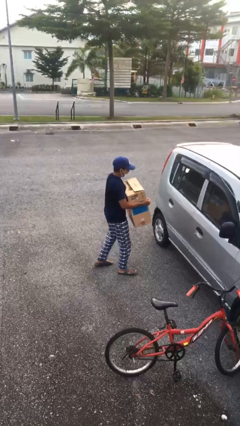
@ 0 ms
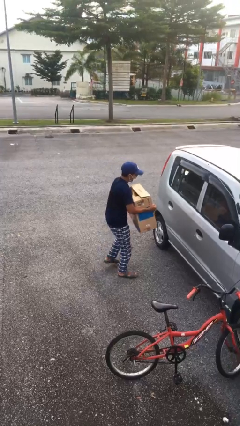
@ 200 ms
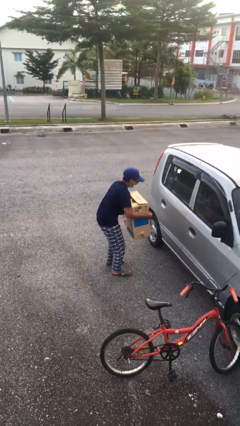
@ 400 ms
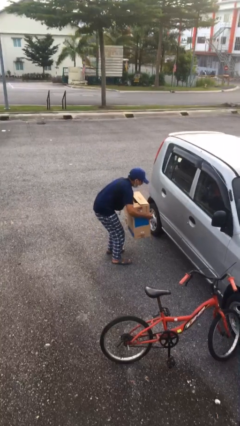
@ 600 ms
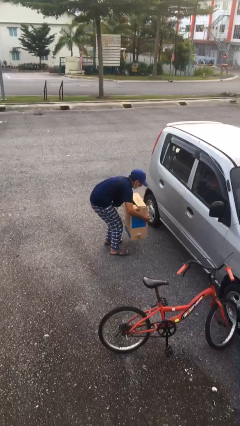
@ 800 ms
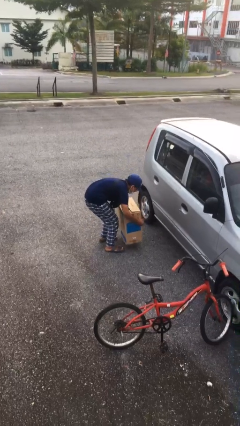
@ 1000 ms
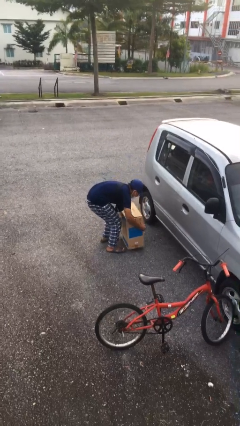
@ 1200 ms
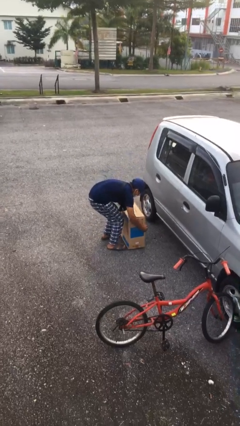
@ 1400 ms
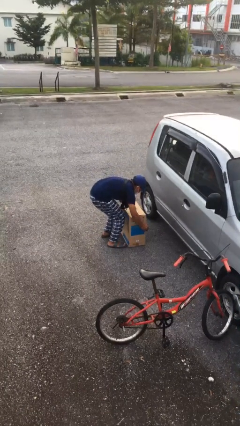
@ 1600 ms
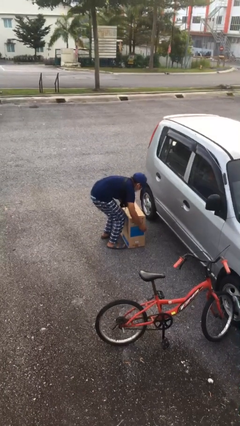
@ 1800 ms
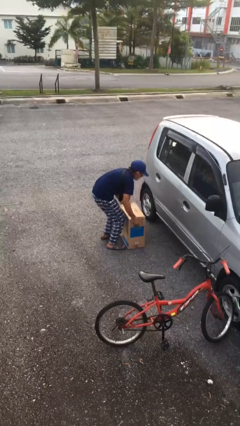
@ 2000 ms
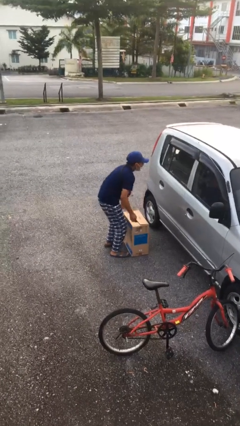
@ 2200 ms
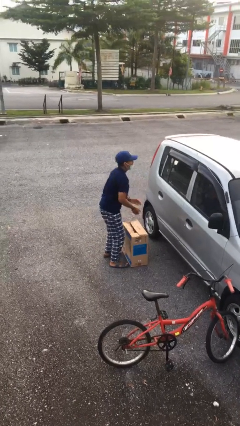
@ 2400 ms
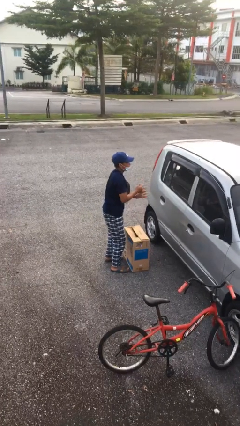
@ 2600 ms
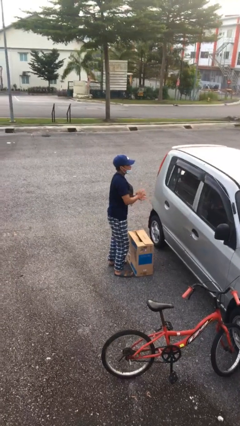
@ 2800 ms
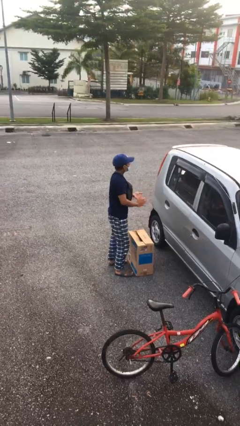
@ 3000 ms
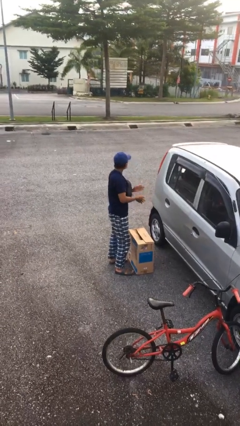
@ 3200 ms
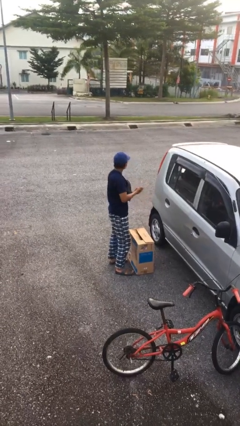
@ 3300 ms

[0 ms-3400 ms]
person puts down object on floor

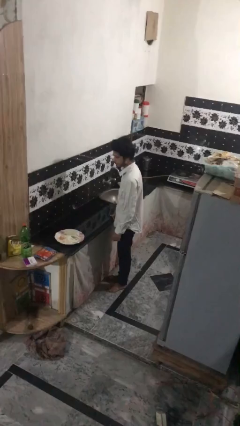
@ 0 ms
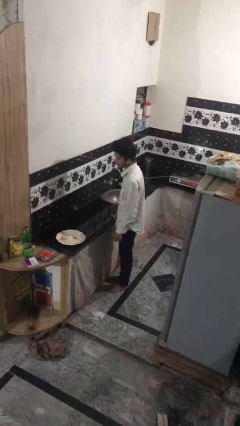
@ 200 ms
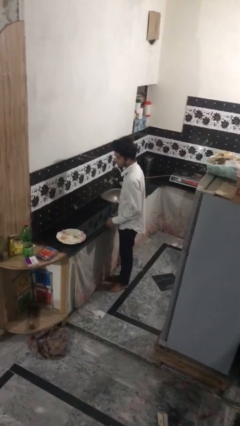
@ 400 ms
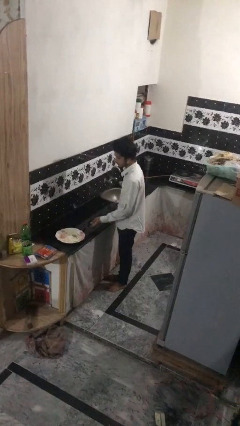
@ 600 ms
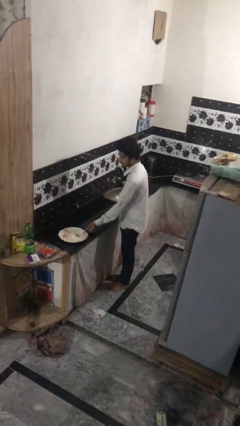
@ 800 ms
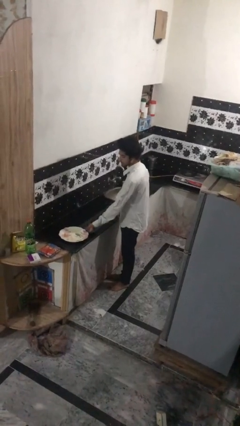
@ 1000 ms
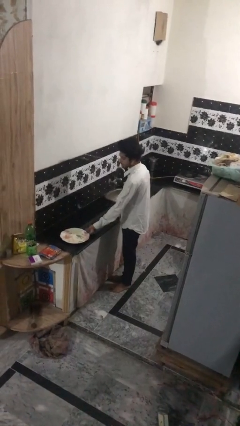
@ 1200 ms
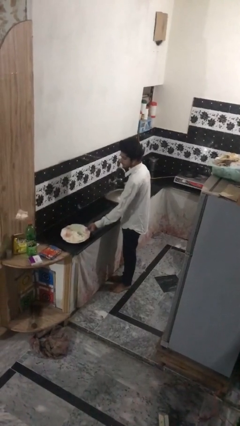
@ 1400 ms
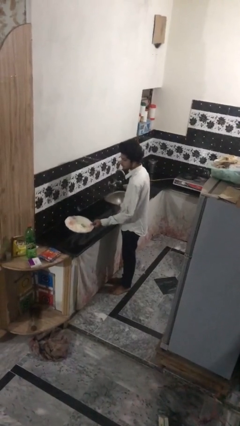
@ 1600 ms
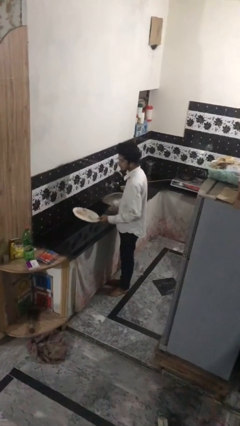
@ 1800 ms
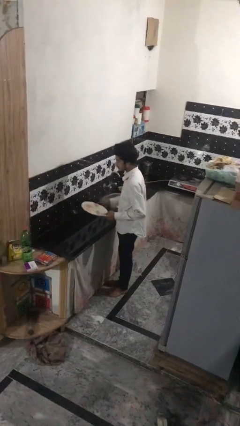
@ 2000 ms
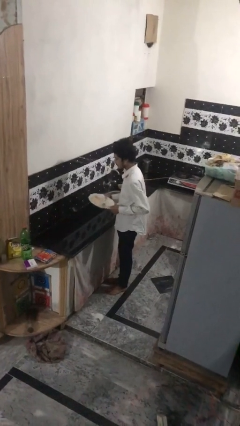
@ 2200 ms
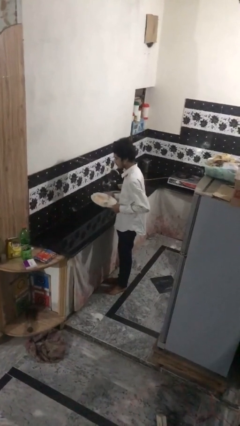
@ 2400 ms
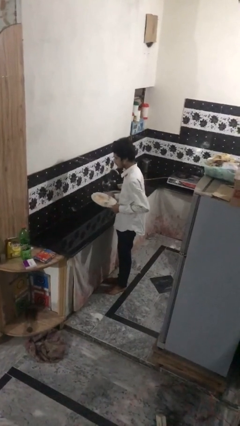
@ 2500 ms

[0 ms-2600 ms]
person picks up object from countertop

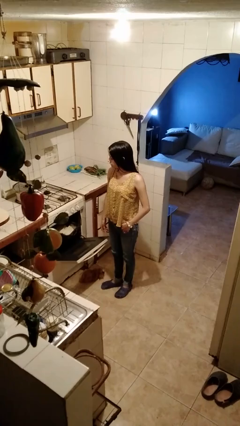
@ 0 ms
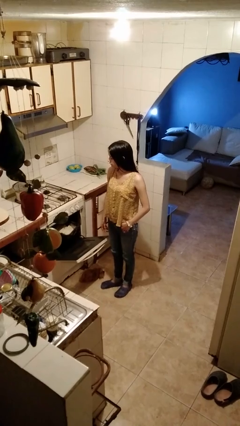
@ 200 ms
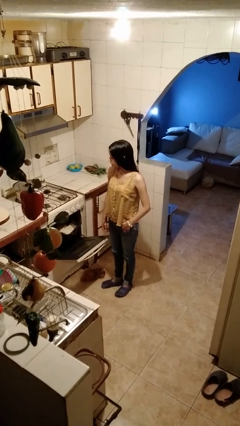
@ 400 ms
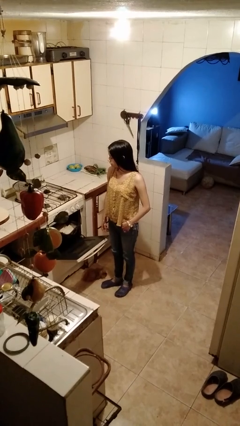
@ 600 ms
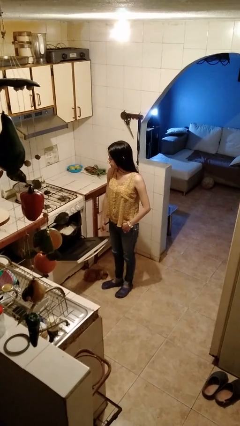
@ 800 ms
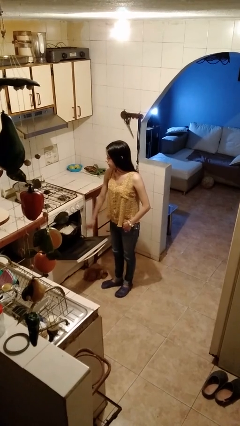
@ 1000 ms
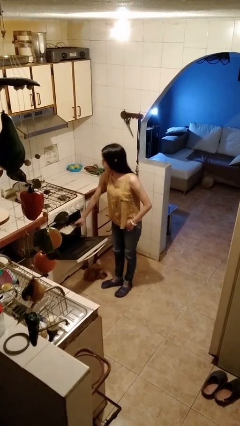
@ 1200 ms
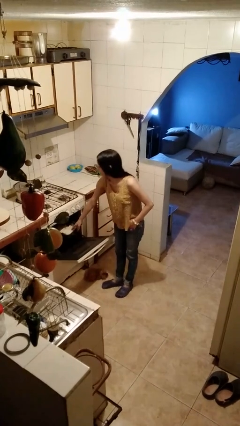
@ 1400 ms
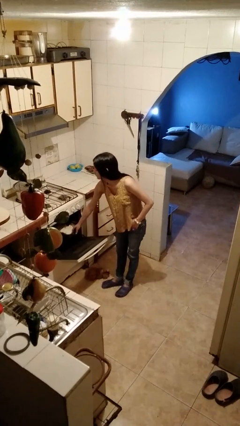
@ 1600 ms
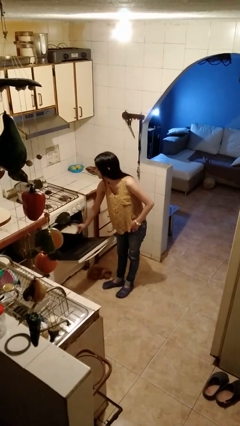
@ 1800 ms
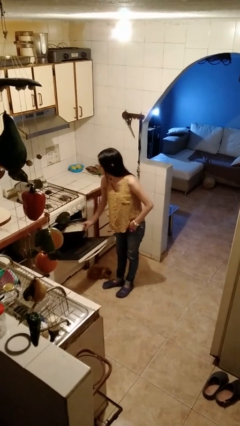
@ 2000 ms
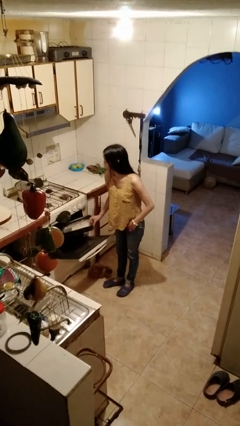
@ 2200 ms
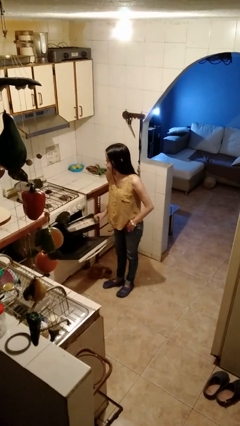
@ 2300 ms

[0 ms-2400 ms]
person takes object from oven

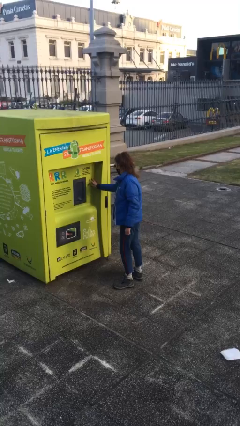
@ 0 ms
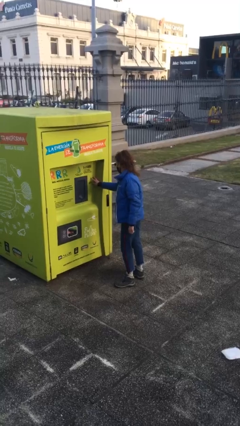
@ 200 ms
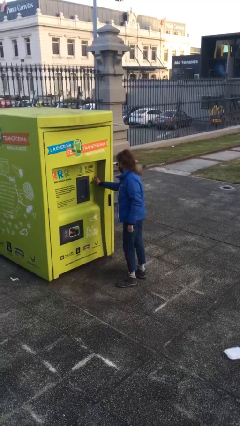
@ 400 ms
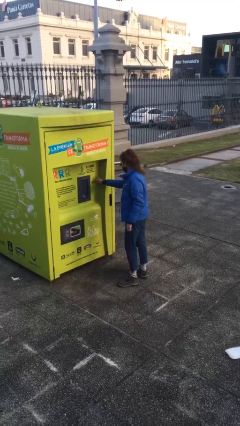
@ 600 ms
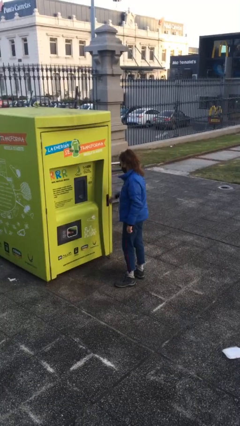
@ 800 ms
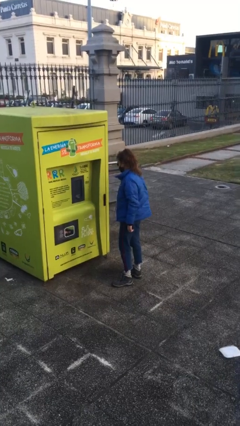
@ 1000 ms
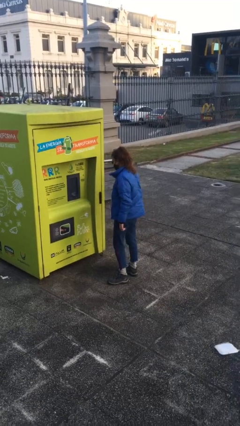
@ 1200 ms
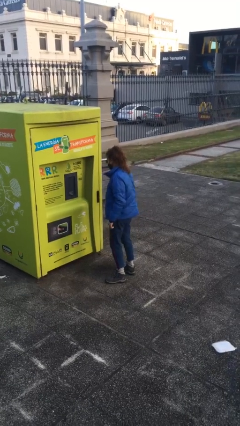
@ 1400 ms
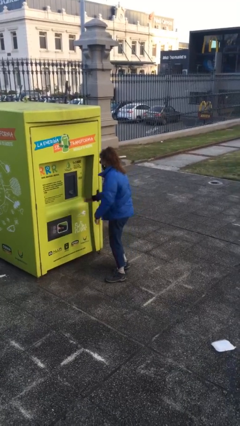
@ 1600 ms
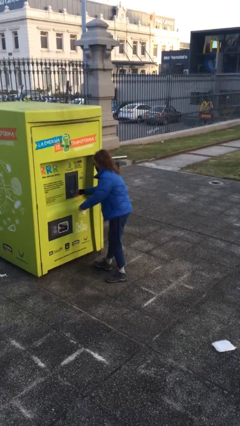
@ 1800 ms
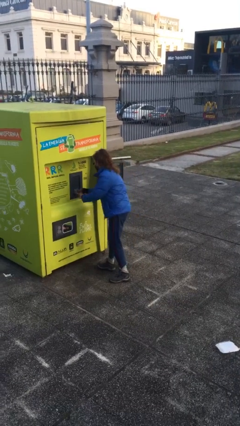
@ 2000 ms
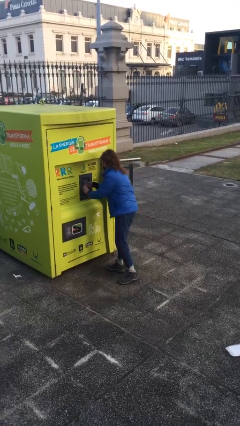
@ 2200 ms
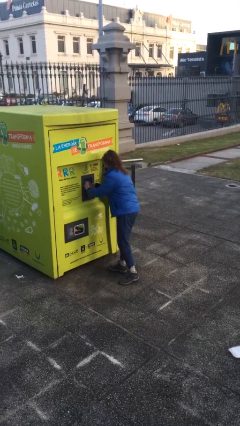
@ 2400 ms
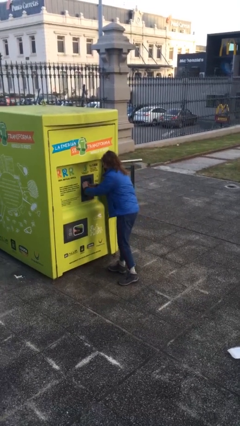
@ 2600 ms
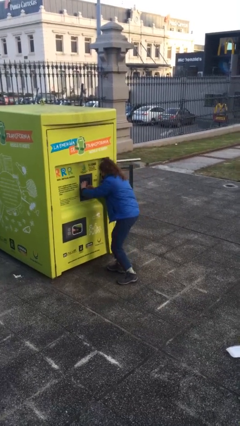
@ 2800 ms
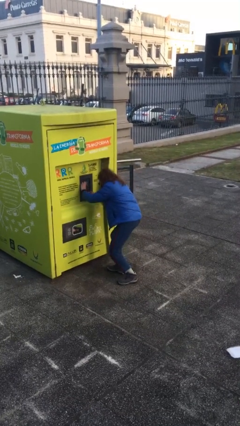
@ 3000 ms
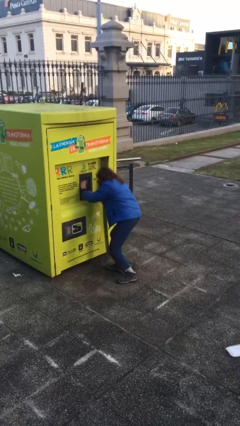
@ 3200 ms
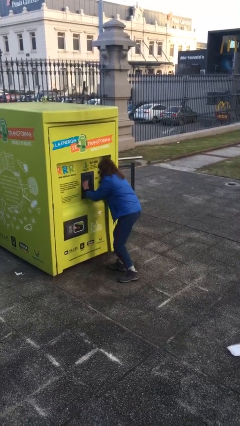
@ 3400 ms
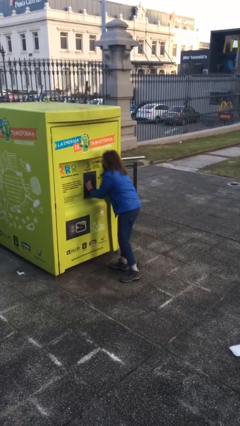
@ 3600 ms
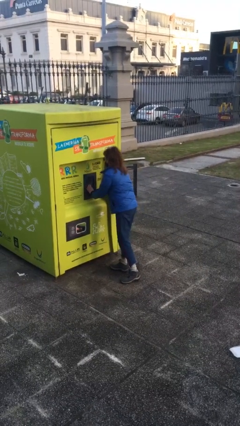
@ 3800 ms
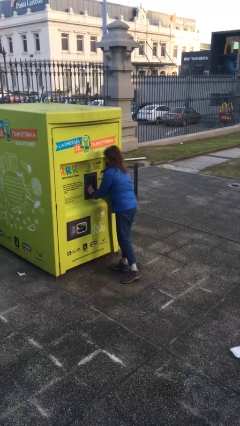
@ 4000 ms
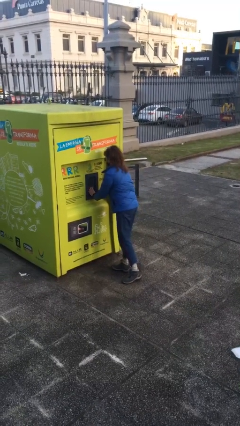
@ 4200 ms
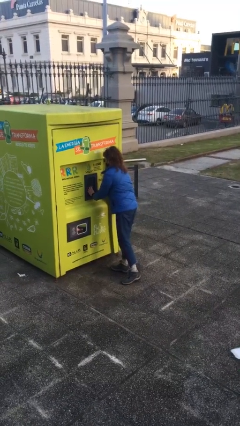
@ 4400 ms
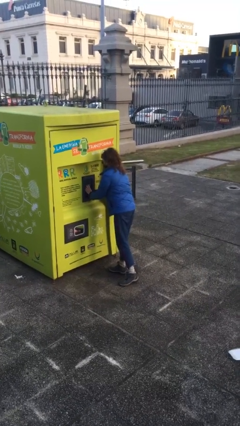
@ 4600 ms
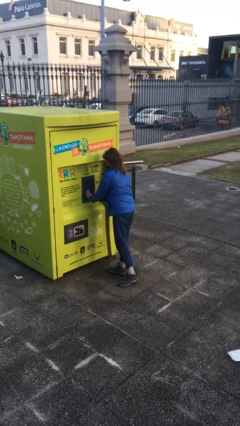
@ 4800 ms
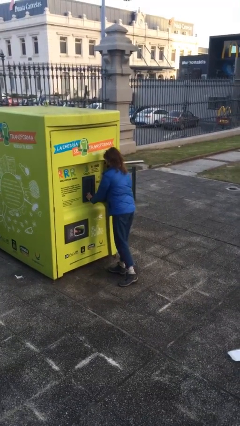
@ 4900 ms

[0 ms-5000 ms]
person purchases from machine

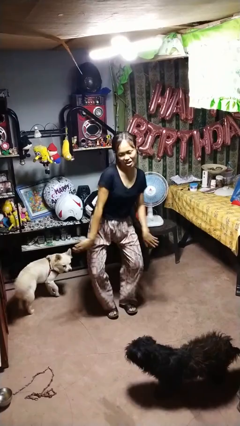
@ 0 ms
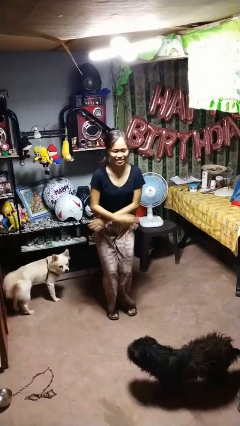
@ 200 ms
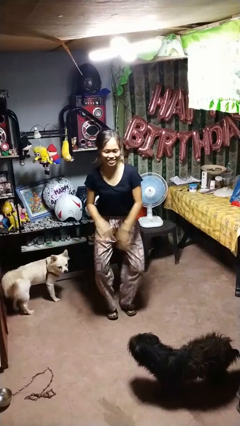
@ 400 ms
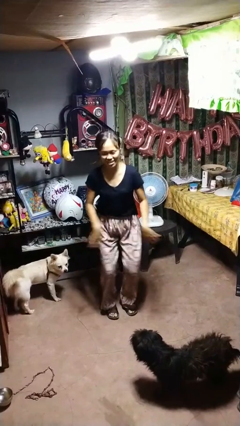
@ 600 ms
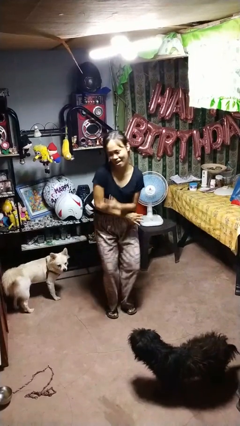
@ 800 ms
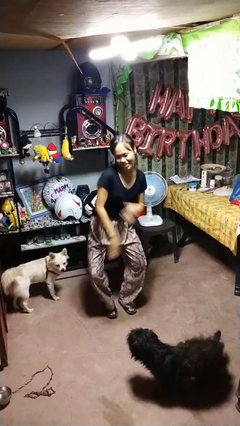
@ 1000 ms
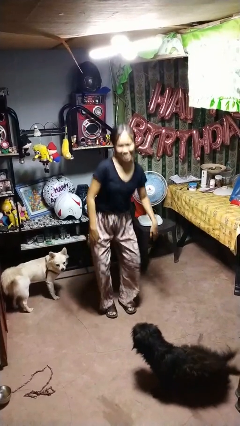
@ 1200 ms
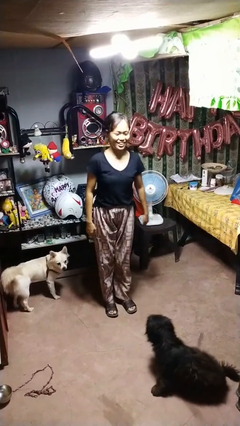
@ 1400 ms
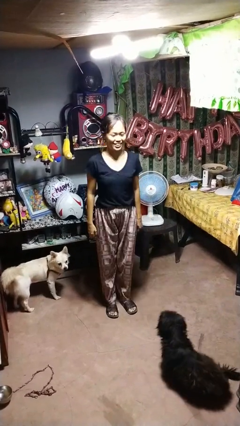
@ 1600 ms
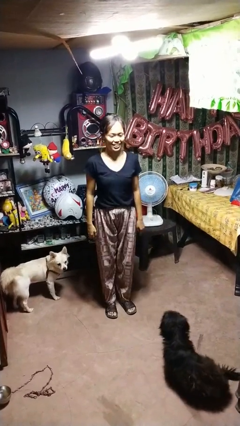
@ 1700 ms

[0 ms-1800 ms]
person dances in place

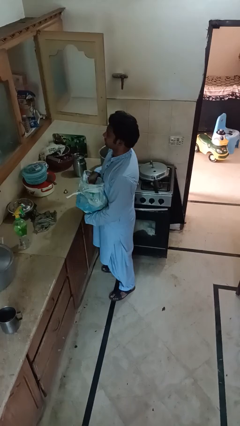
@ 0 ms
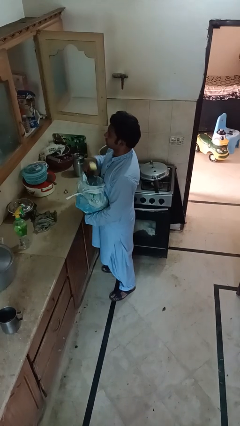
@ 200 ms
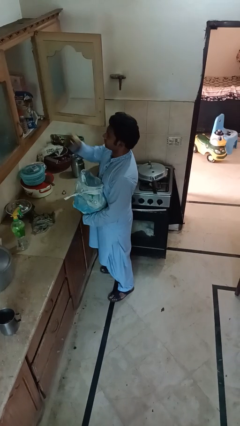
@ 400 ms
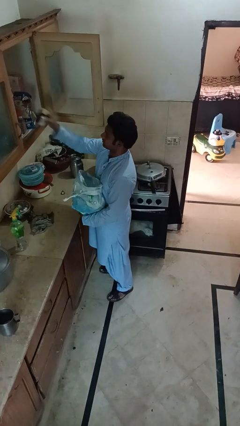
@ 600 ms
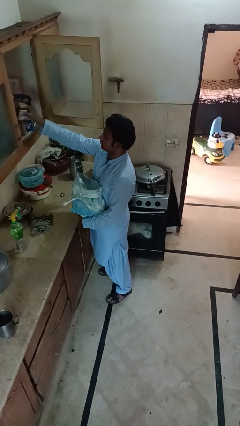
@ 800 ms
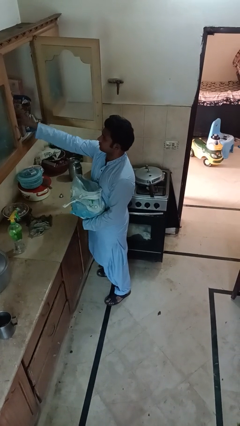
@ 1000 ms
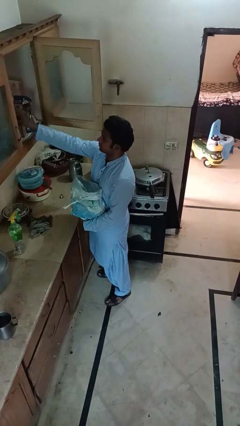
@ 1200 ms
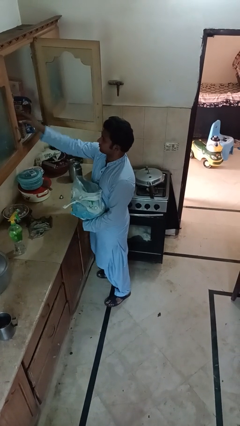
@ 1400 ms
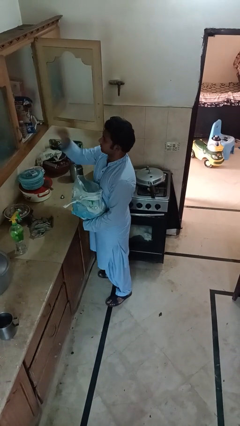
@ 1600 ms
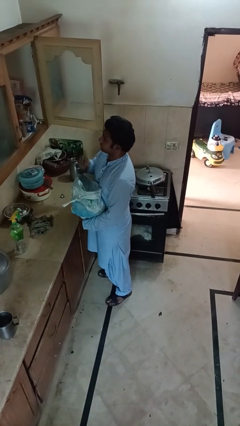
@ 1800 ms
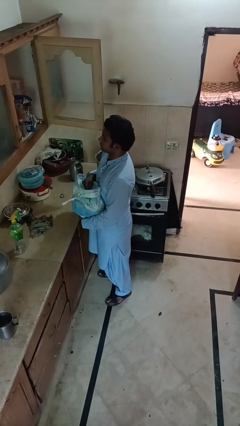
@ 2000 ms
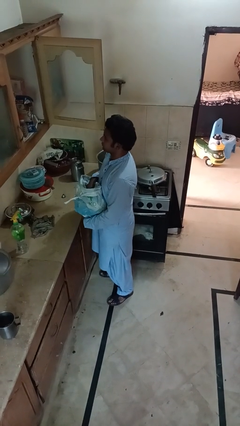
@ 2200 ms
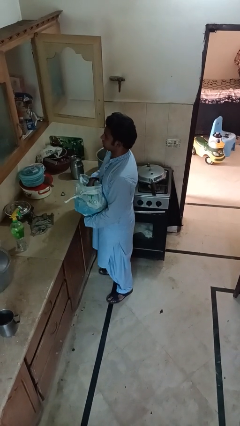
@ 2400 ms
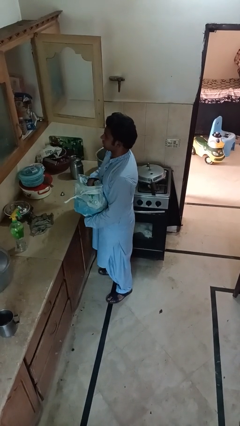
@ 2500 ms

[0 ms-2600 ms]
person loads groceries into cabinet
